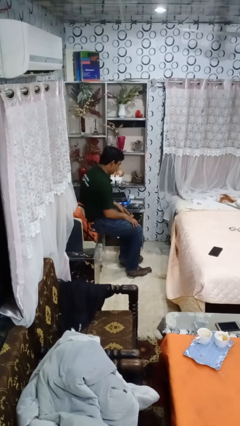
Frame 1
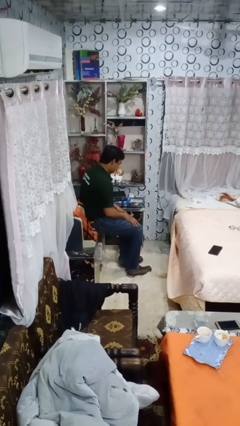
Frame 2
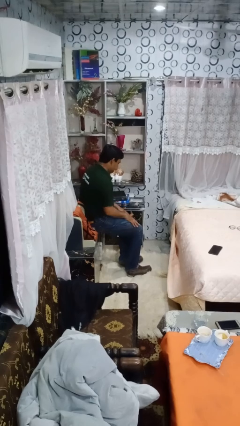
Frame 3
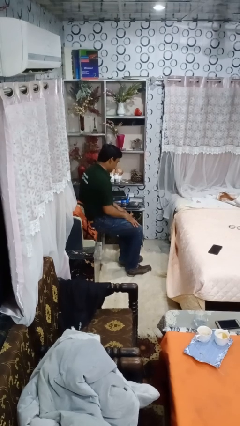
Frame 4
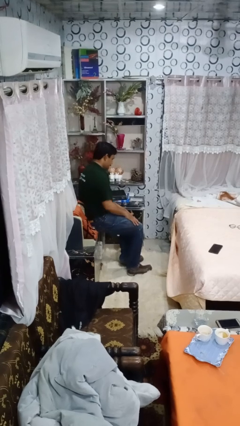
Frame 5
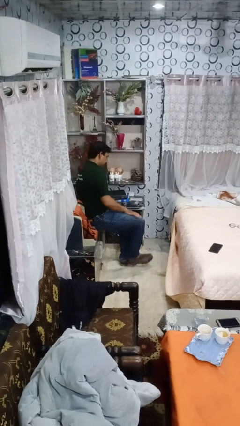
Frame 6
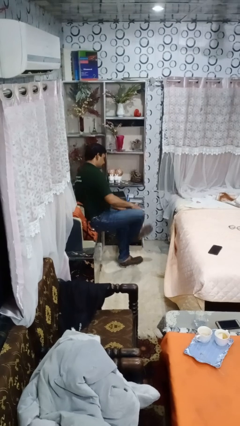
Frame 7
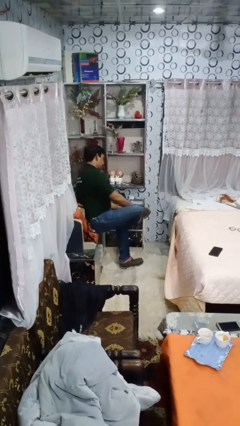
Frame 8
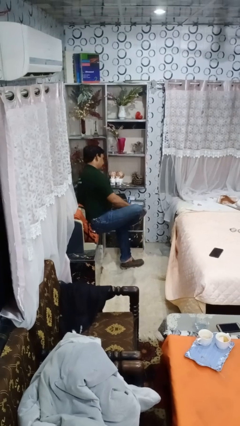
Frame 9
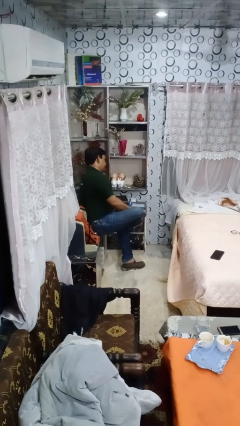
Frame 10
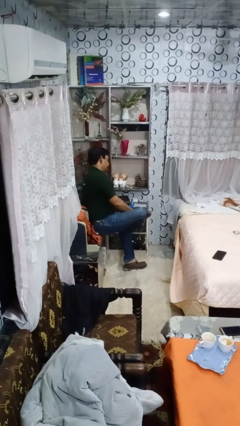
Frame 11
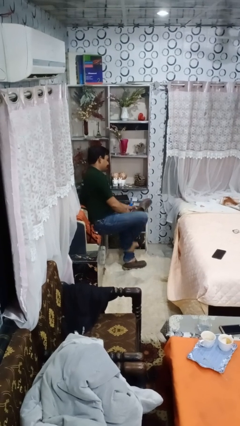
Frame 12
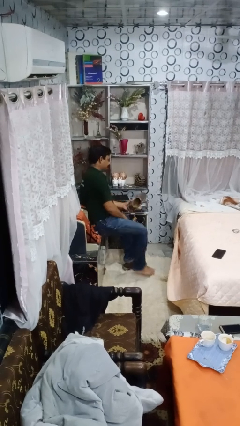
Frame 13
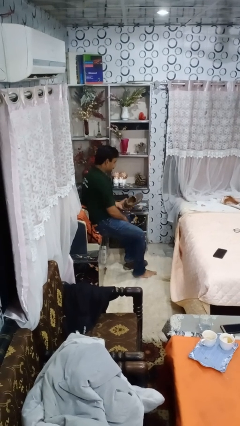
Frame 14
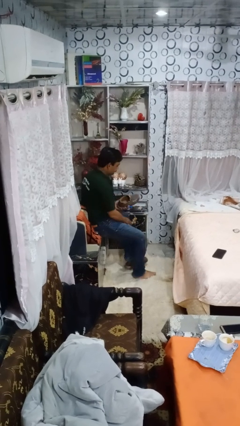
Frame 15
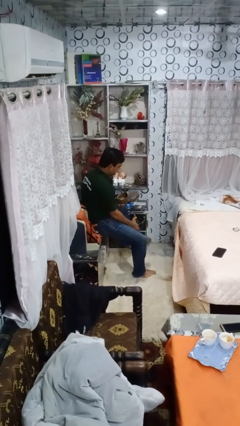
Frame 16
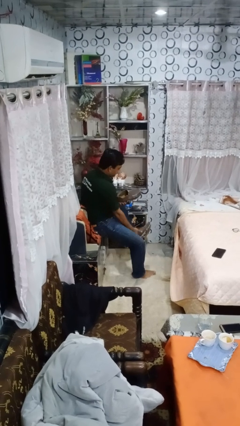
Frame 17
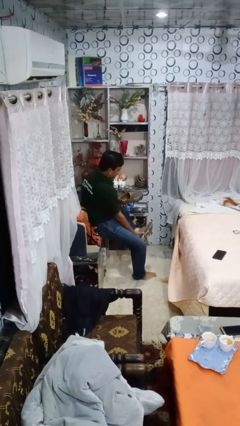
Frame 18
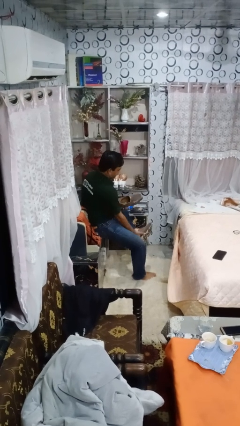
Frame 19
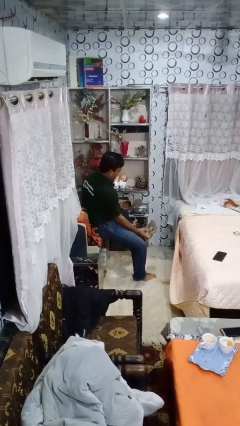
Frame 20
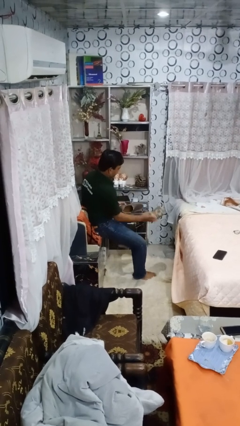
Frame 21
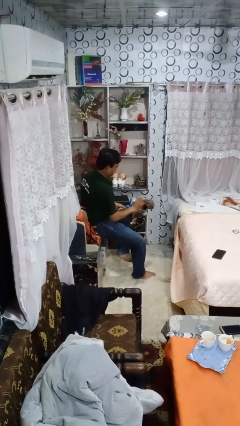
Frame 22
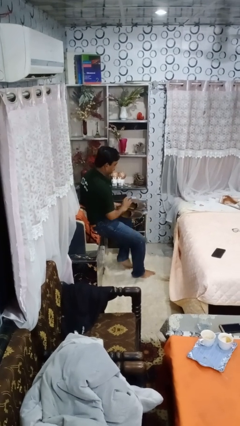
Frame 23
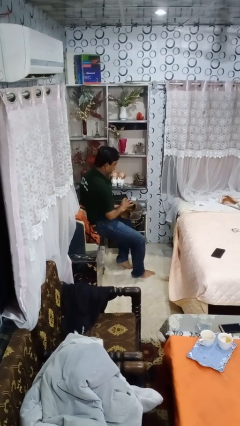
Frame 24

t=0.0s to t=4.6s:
person takes off shoes

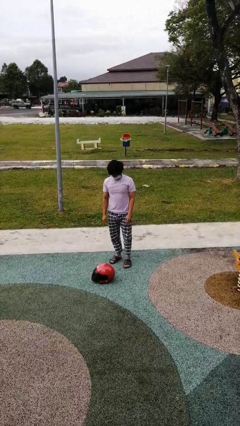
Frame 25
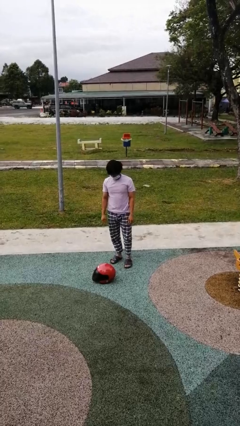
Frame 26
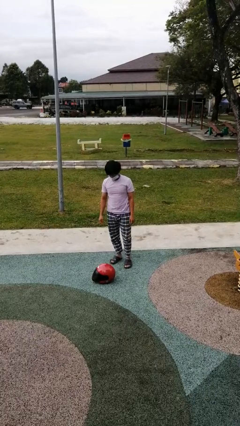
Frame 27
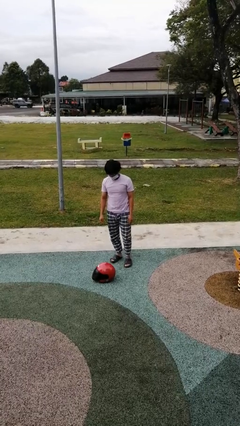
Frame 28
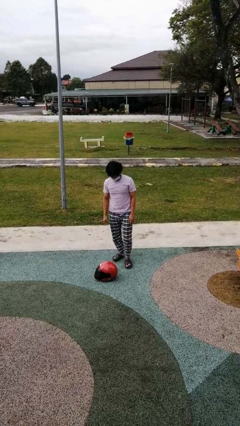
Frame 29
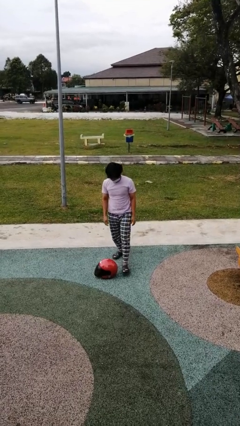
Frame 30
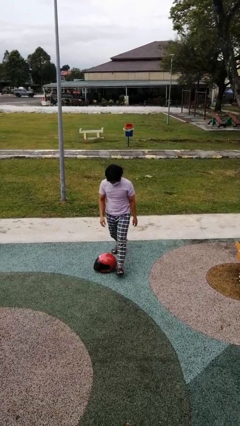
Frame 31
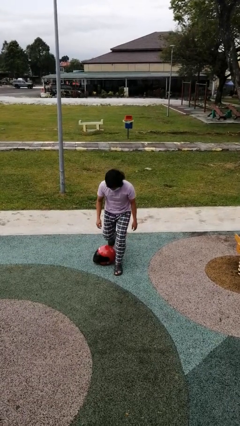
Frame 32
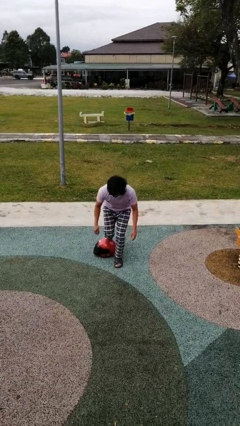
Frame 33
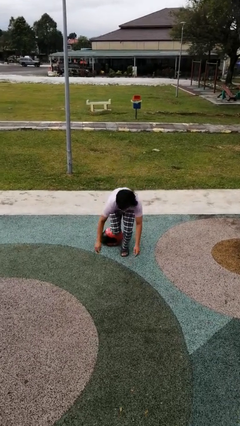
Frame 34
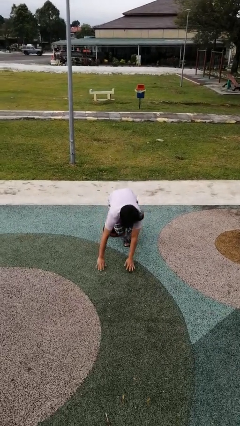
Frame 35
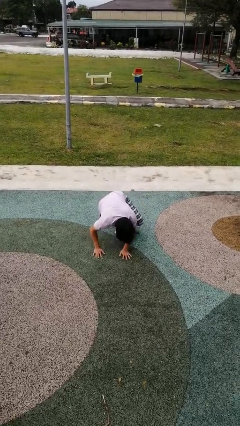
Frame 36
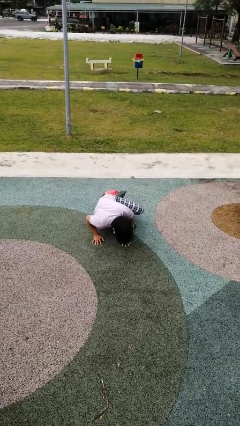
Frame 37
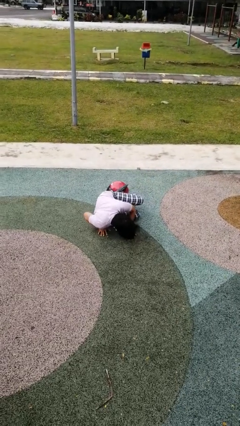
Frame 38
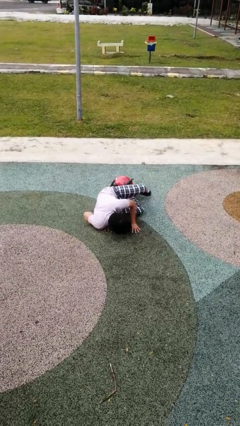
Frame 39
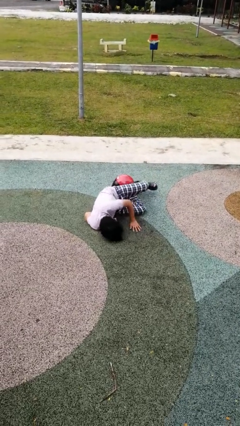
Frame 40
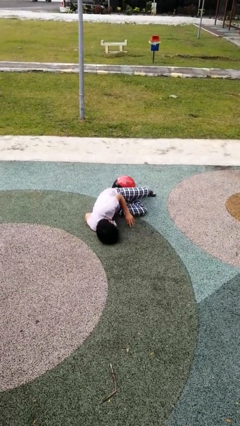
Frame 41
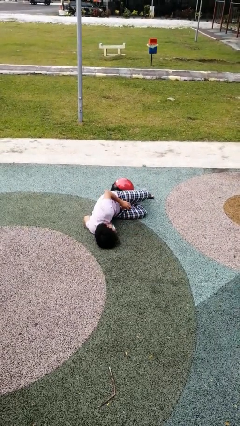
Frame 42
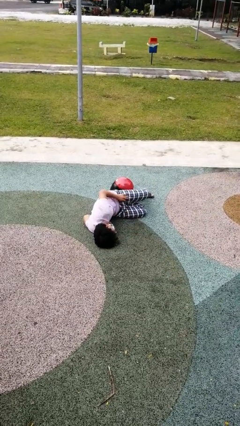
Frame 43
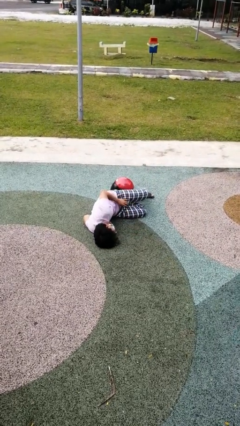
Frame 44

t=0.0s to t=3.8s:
person trips on object on floor

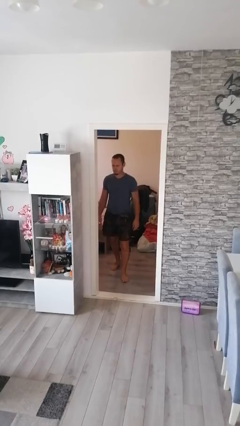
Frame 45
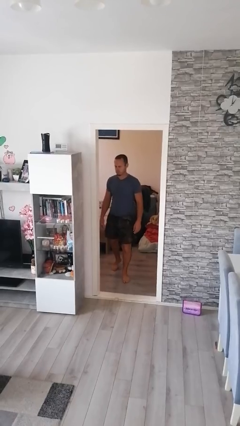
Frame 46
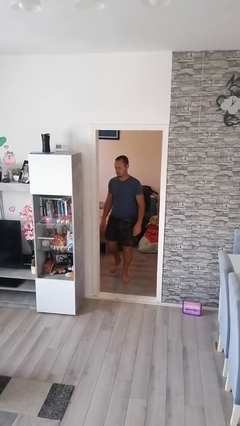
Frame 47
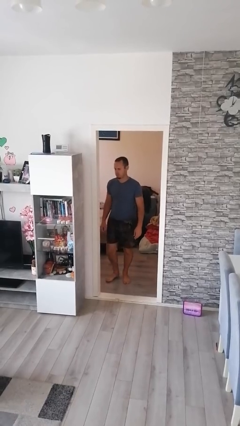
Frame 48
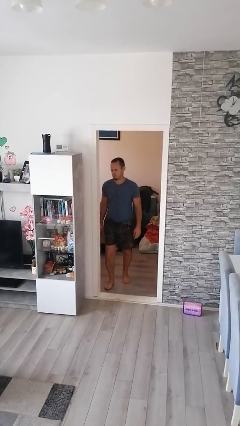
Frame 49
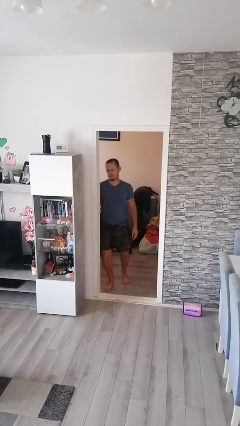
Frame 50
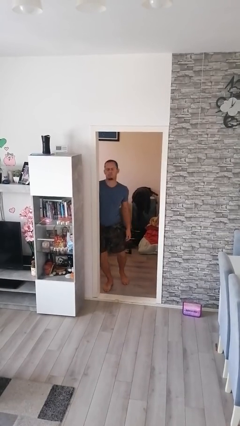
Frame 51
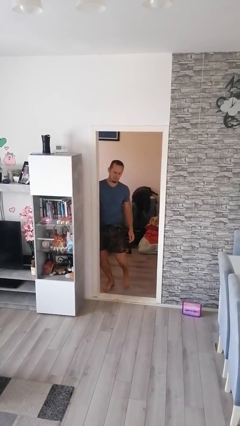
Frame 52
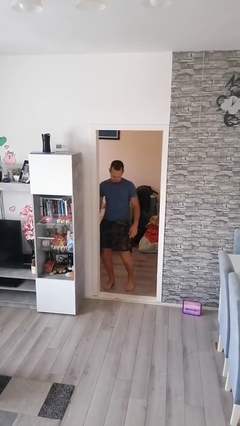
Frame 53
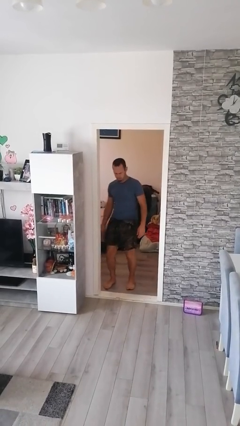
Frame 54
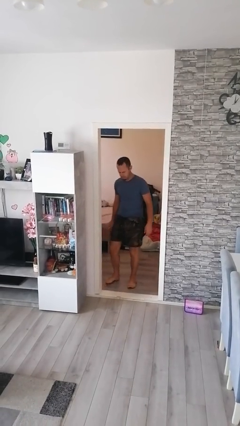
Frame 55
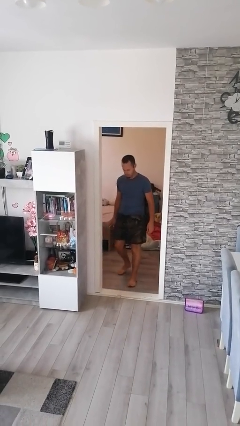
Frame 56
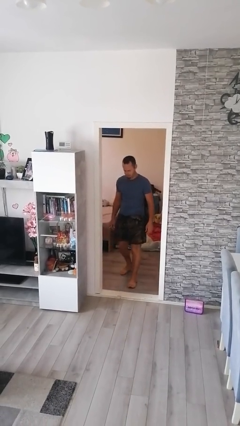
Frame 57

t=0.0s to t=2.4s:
person bumps into wall

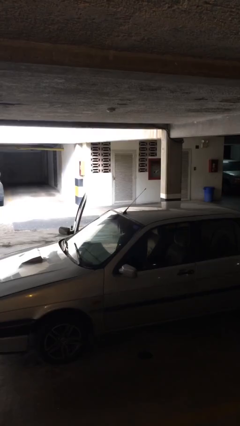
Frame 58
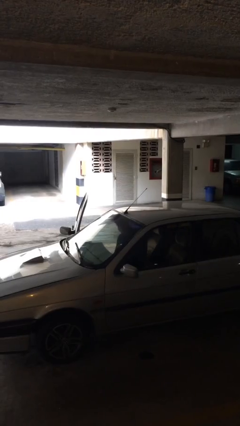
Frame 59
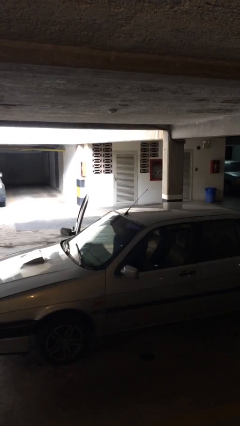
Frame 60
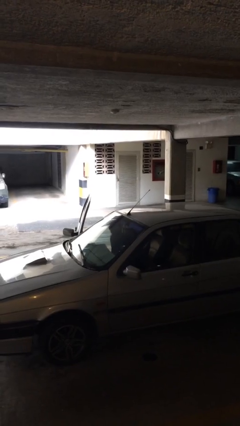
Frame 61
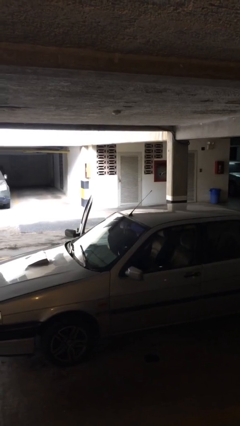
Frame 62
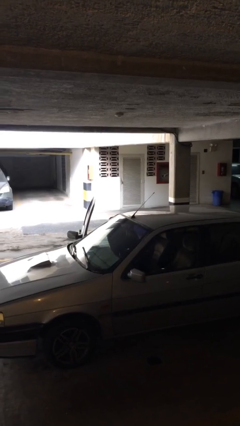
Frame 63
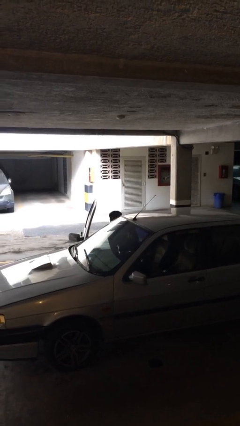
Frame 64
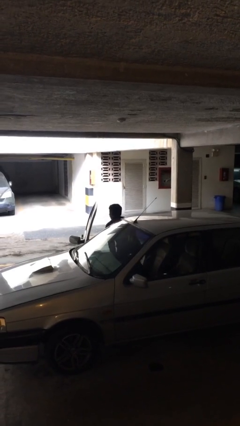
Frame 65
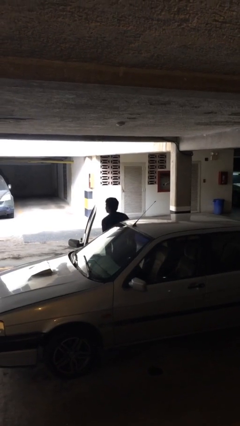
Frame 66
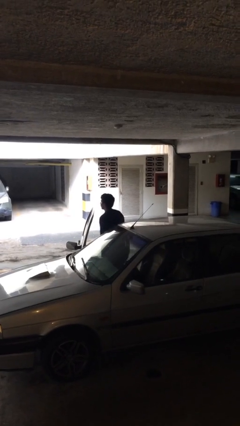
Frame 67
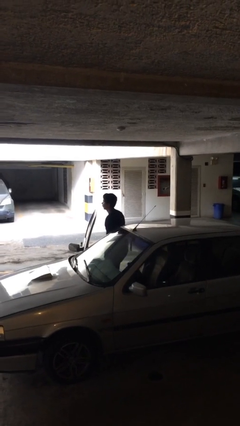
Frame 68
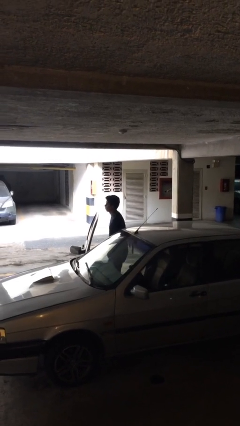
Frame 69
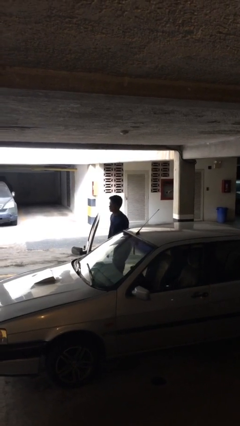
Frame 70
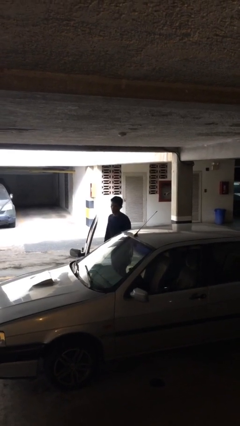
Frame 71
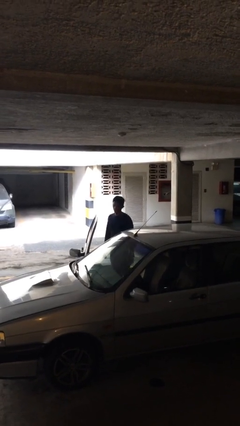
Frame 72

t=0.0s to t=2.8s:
person exits car

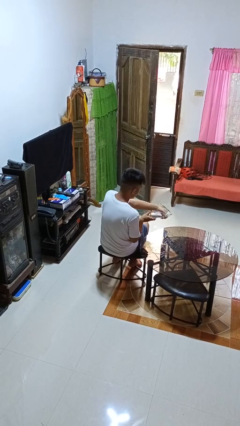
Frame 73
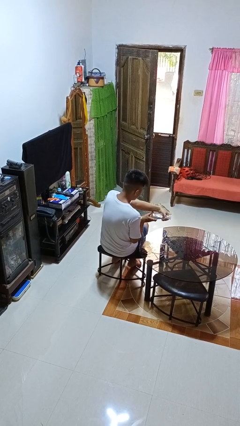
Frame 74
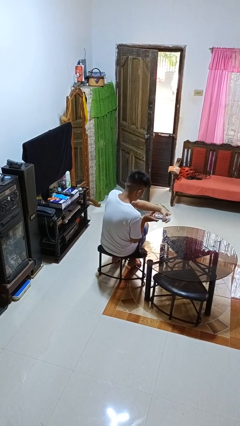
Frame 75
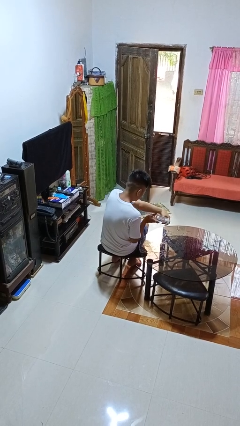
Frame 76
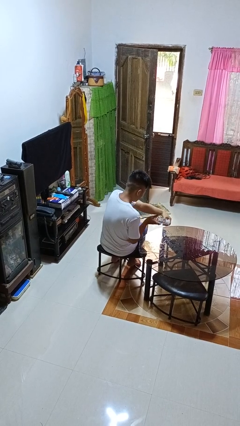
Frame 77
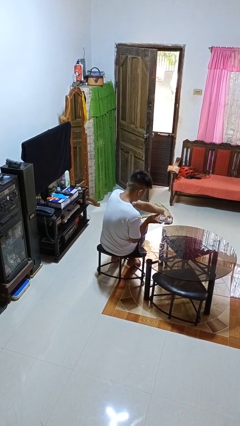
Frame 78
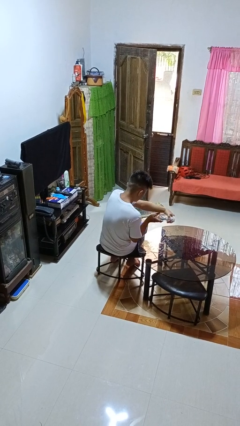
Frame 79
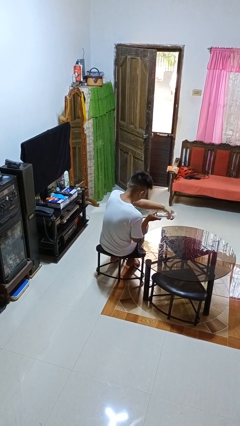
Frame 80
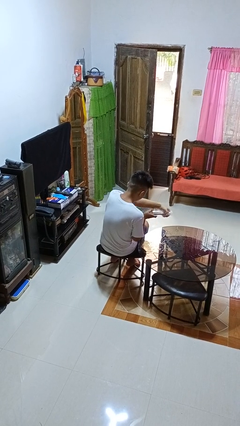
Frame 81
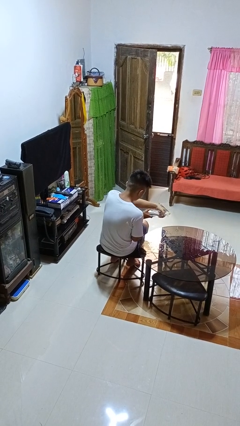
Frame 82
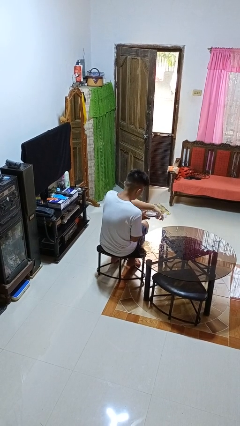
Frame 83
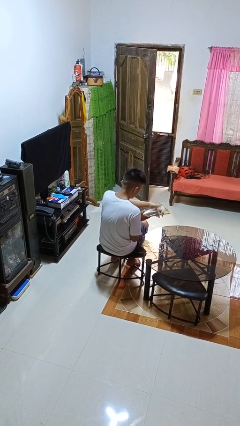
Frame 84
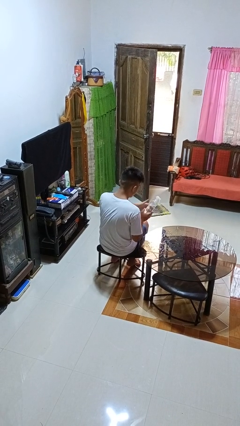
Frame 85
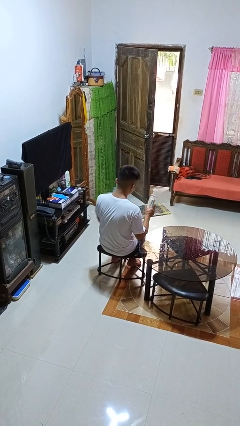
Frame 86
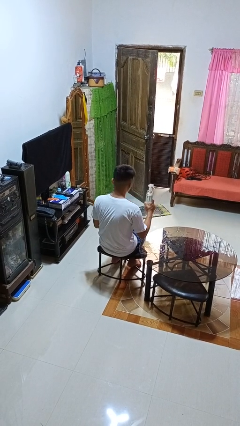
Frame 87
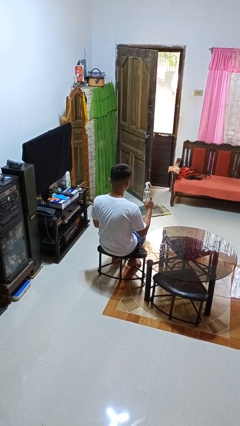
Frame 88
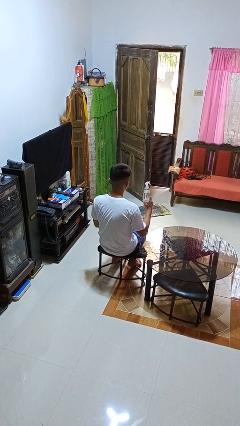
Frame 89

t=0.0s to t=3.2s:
person sprays from bottle
